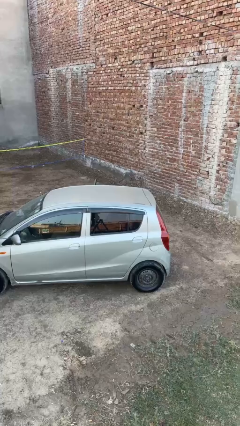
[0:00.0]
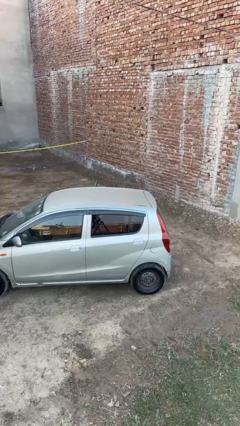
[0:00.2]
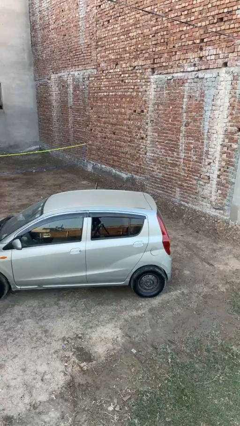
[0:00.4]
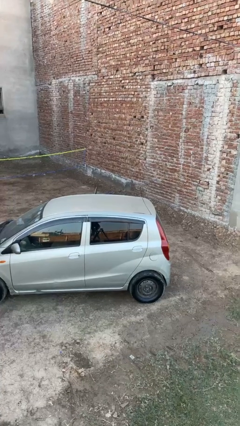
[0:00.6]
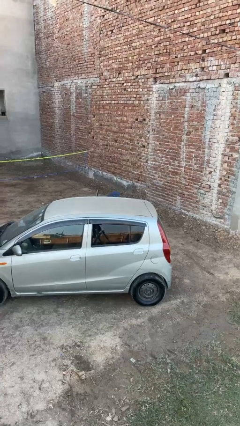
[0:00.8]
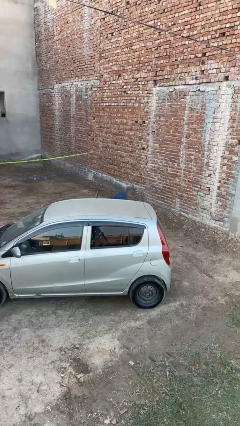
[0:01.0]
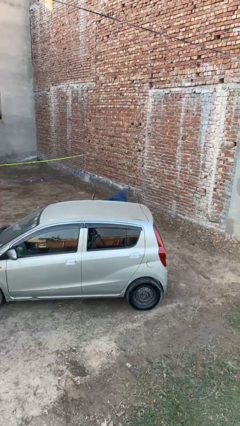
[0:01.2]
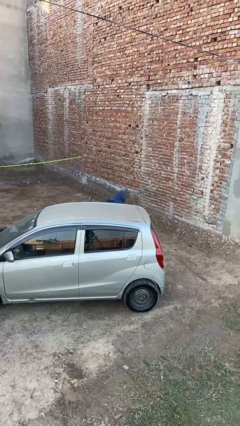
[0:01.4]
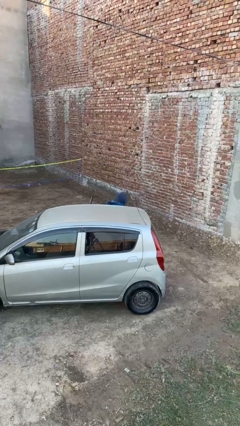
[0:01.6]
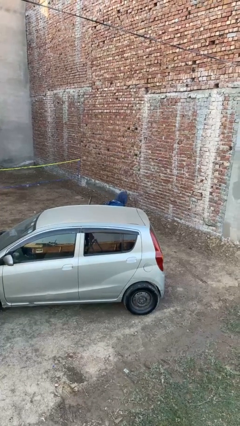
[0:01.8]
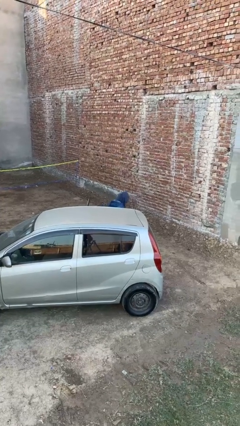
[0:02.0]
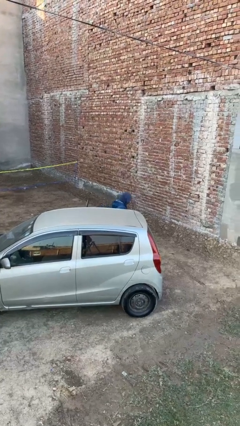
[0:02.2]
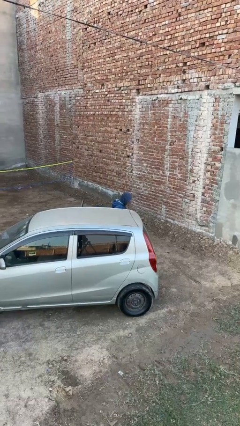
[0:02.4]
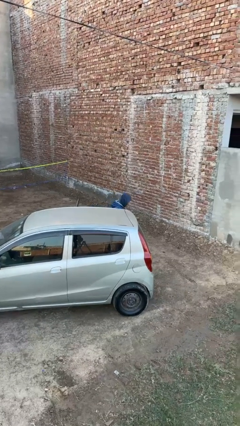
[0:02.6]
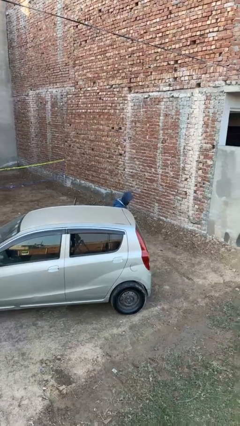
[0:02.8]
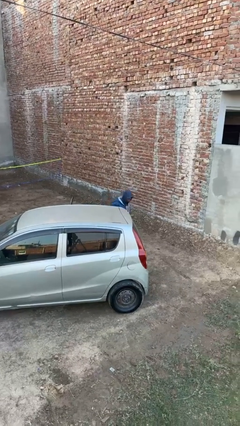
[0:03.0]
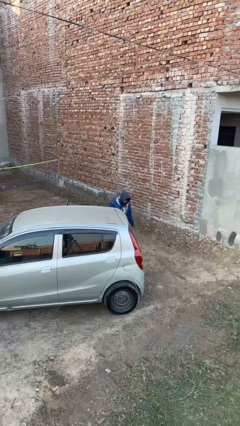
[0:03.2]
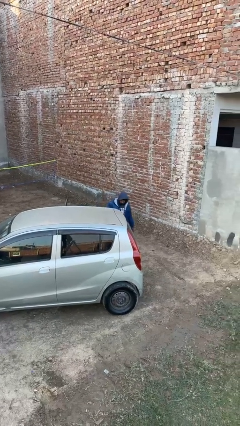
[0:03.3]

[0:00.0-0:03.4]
person exits car

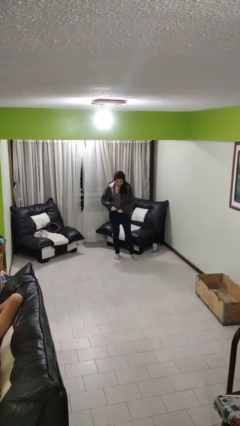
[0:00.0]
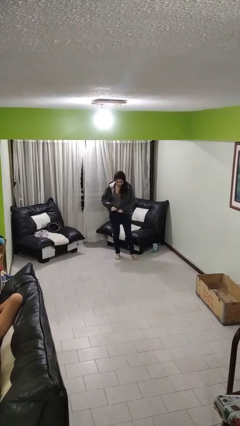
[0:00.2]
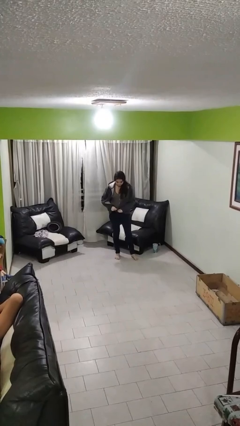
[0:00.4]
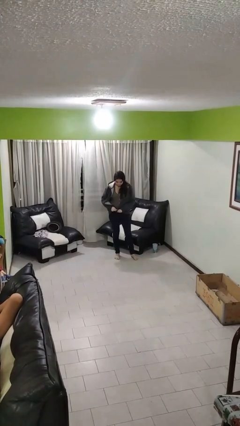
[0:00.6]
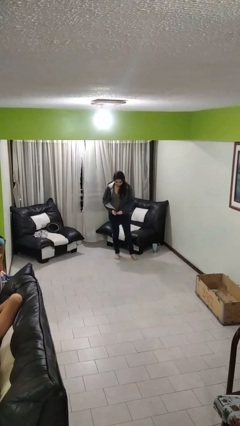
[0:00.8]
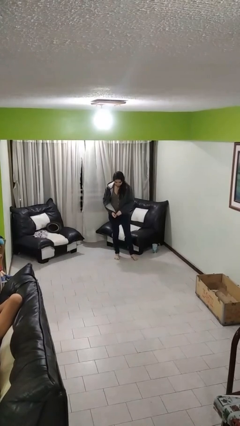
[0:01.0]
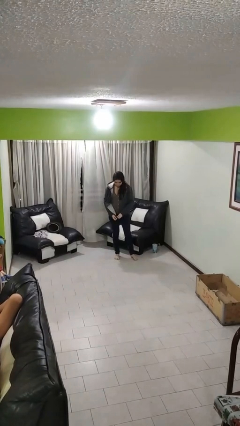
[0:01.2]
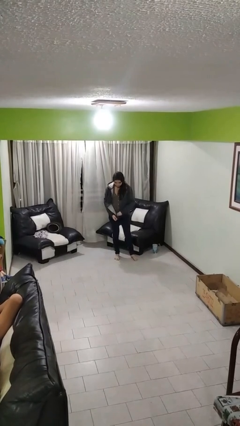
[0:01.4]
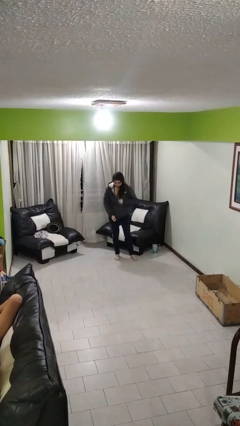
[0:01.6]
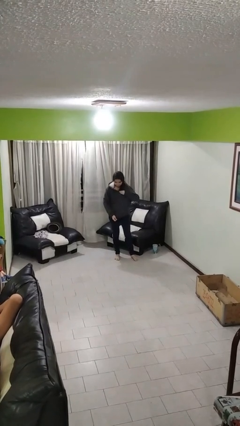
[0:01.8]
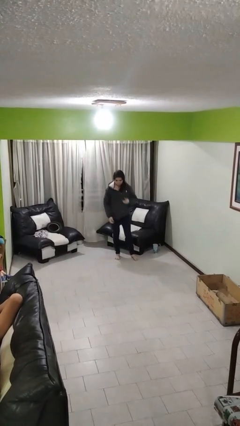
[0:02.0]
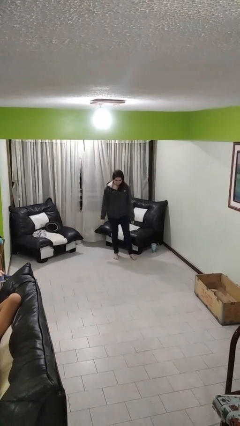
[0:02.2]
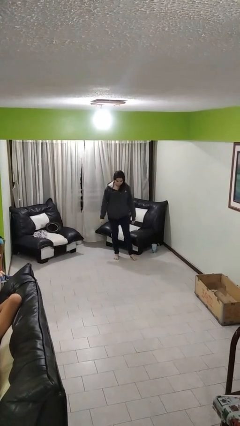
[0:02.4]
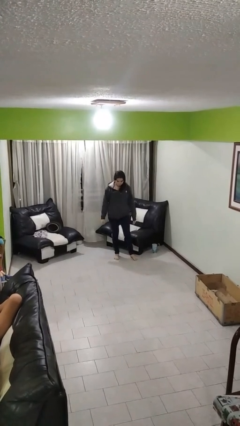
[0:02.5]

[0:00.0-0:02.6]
person zips up jacket

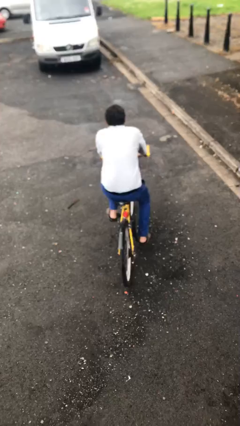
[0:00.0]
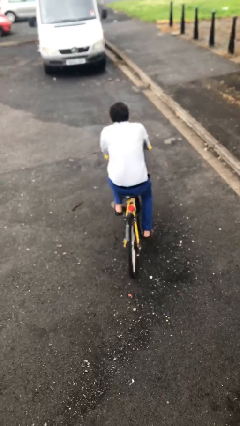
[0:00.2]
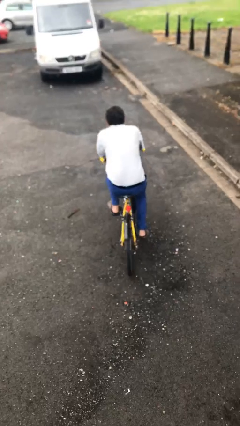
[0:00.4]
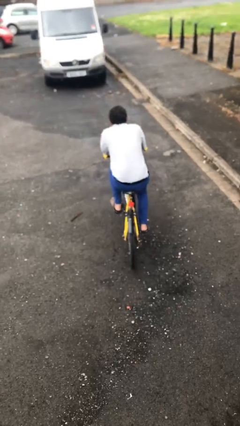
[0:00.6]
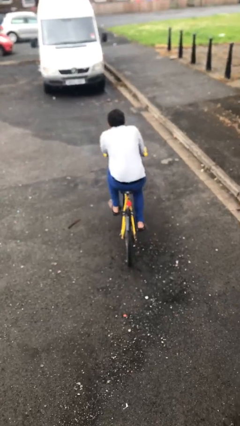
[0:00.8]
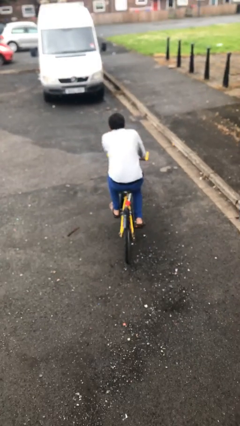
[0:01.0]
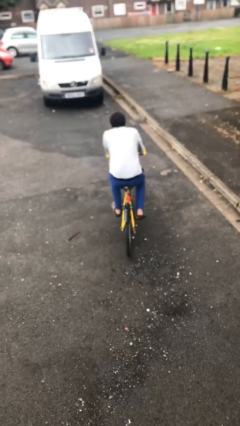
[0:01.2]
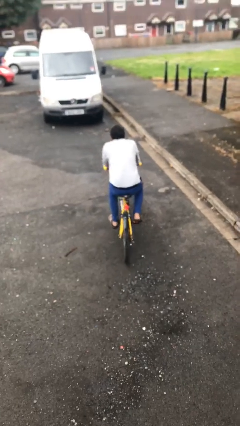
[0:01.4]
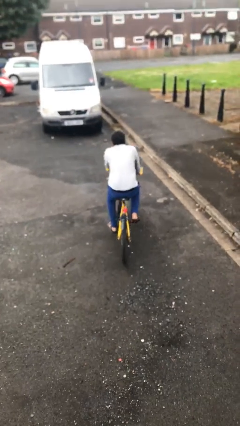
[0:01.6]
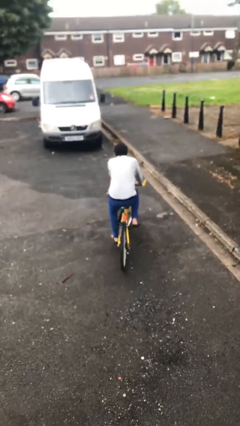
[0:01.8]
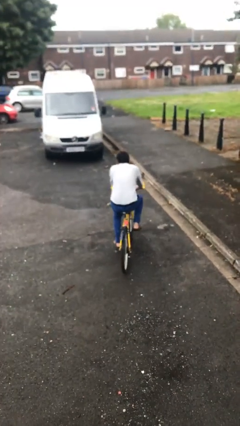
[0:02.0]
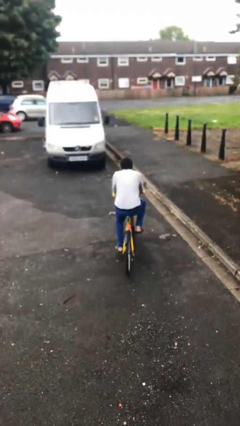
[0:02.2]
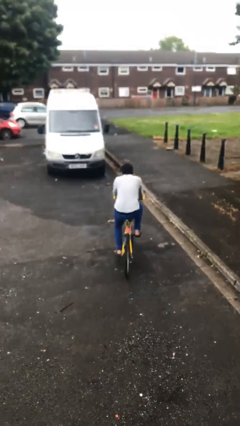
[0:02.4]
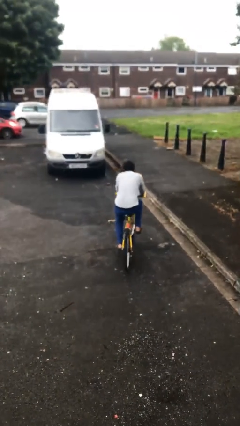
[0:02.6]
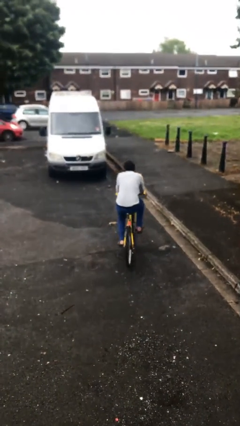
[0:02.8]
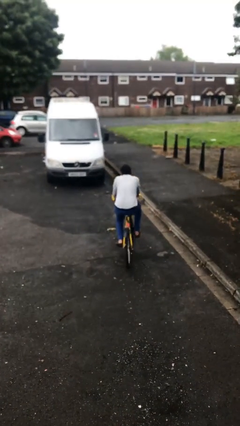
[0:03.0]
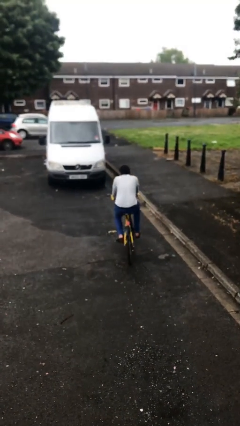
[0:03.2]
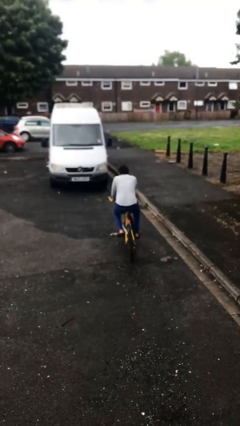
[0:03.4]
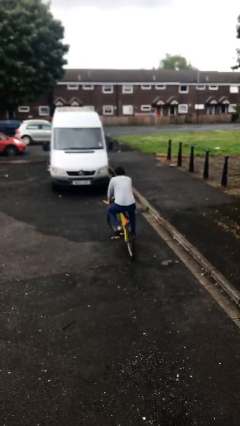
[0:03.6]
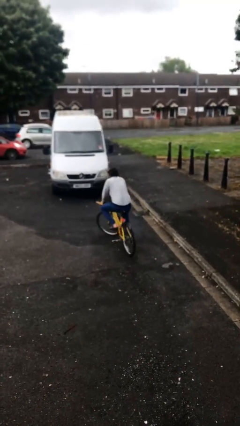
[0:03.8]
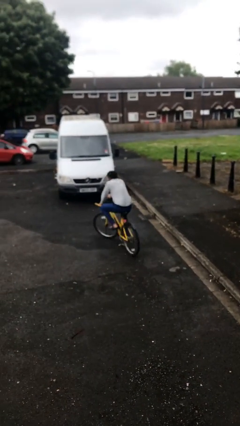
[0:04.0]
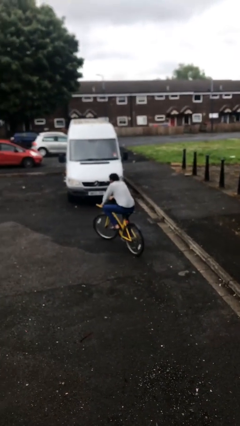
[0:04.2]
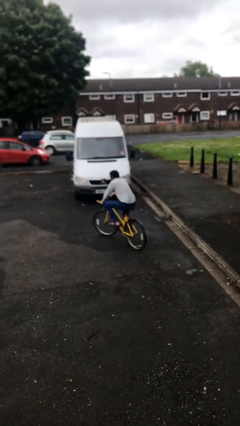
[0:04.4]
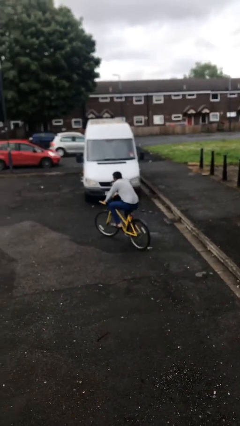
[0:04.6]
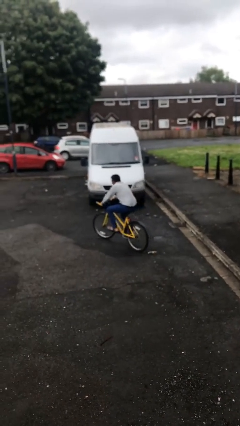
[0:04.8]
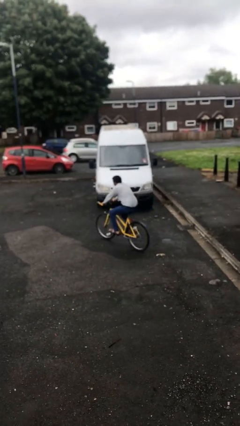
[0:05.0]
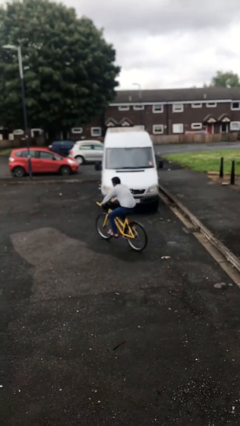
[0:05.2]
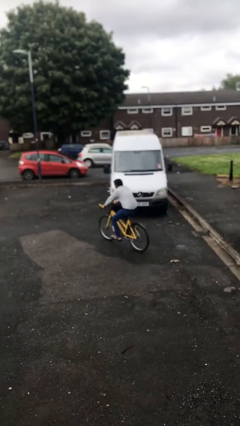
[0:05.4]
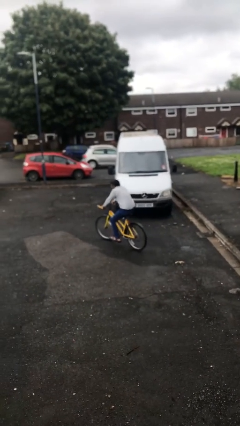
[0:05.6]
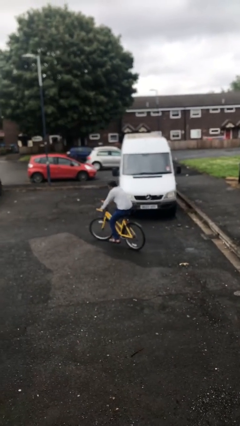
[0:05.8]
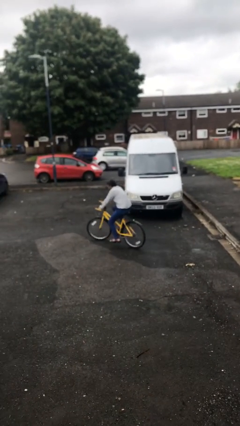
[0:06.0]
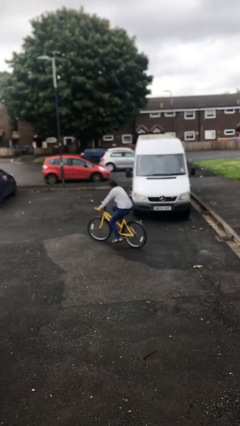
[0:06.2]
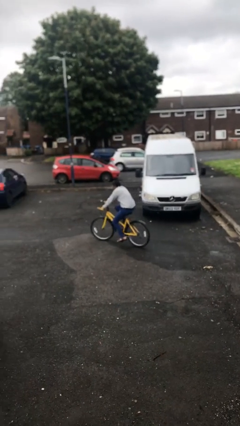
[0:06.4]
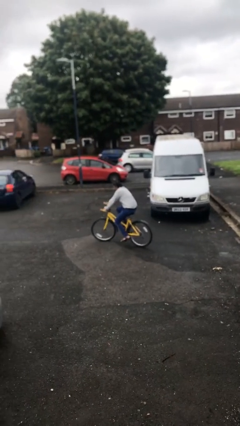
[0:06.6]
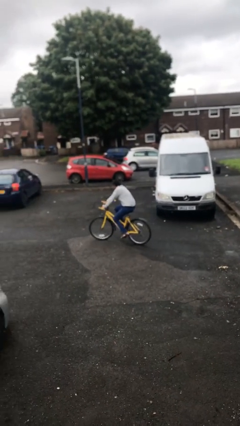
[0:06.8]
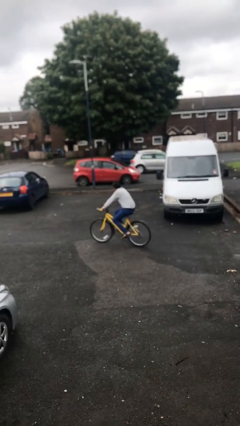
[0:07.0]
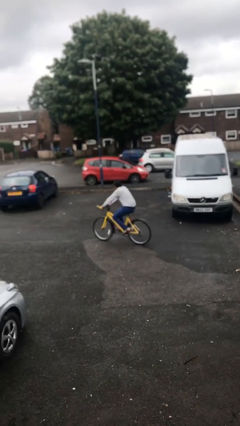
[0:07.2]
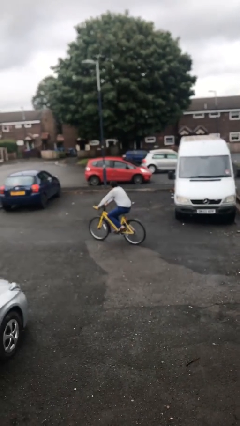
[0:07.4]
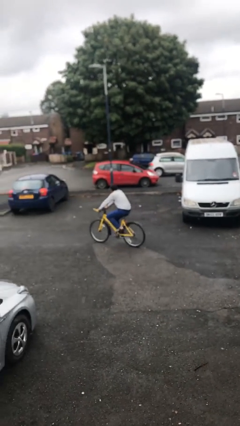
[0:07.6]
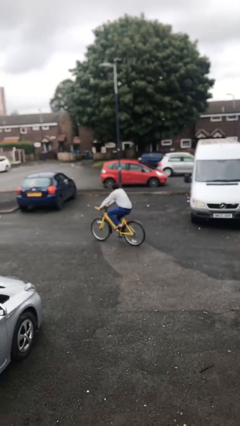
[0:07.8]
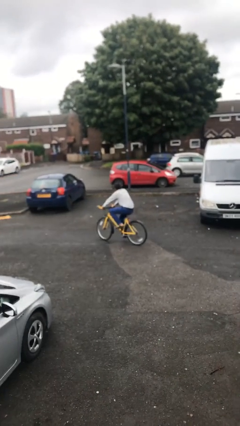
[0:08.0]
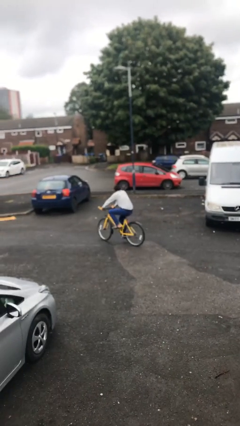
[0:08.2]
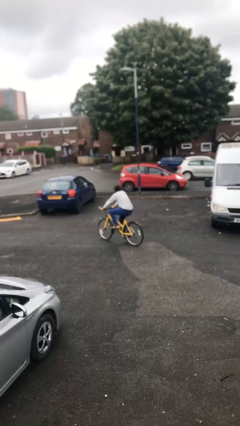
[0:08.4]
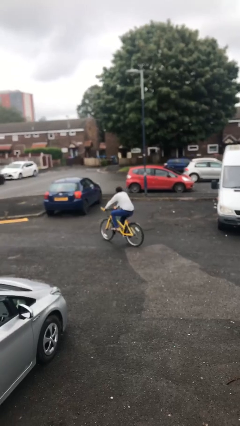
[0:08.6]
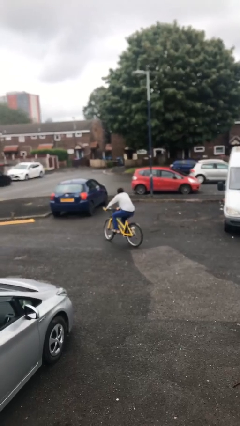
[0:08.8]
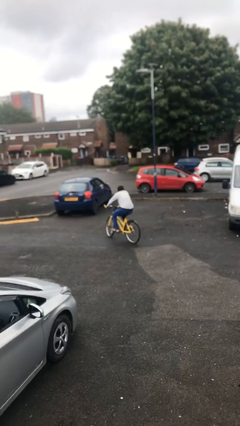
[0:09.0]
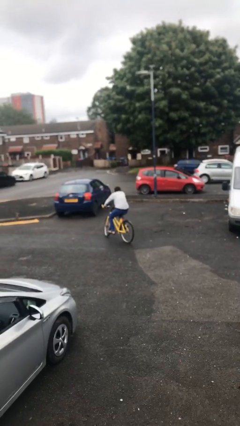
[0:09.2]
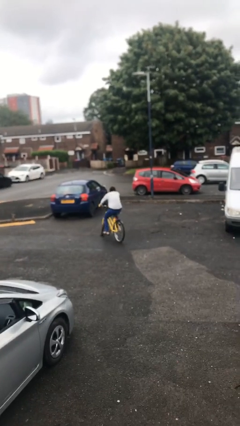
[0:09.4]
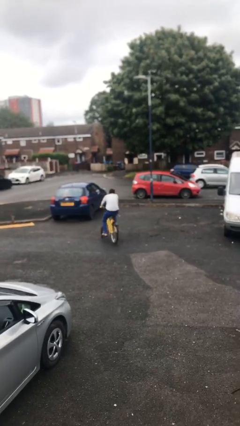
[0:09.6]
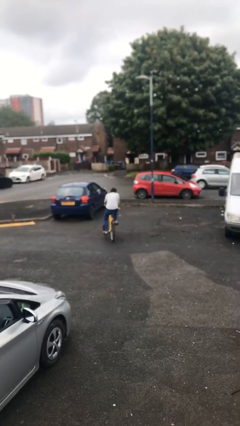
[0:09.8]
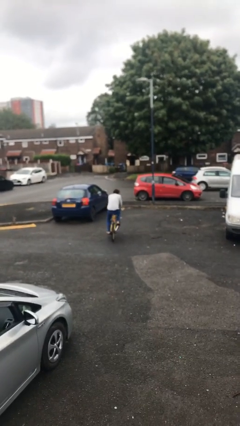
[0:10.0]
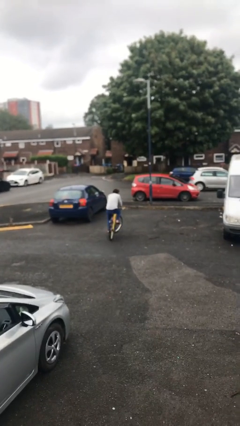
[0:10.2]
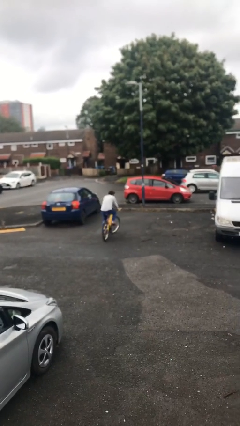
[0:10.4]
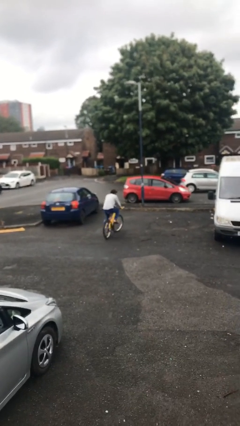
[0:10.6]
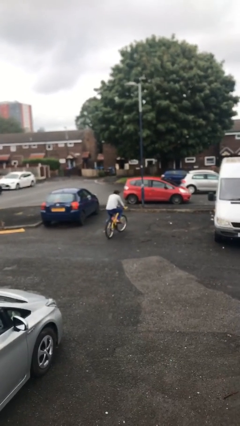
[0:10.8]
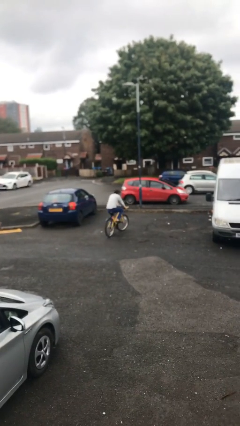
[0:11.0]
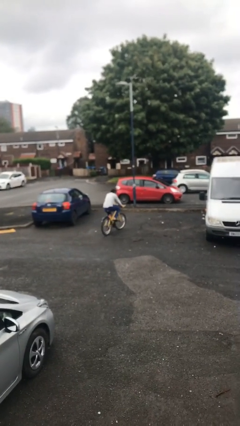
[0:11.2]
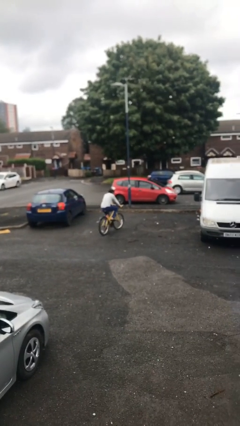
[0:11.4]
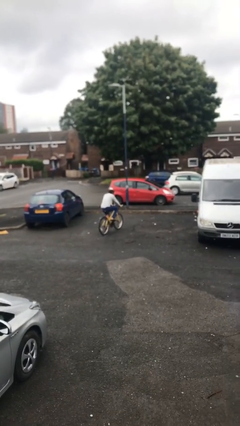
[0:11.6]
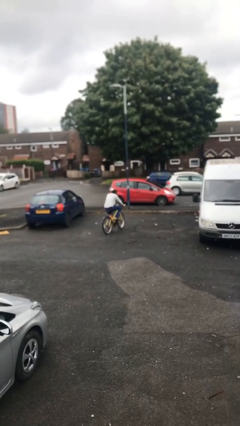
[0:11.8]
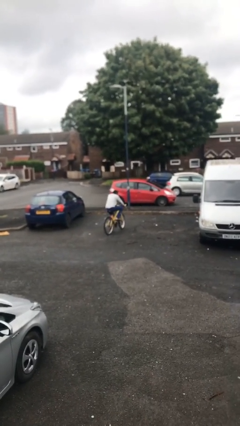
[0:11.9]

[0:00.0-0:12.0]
person rides bicycle
